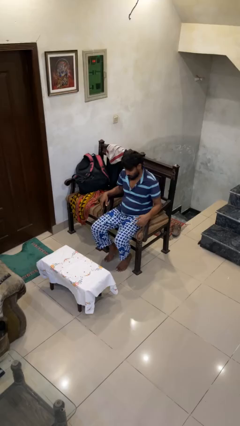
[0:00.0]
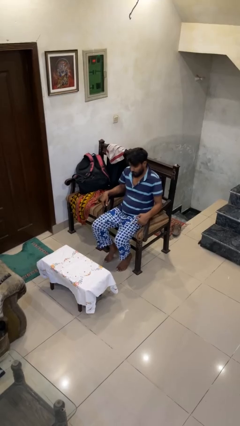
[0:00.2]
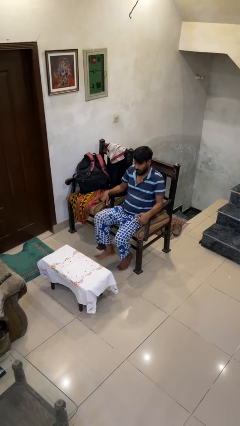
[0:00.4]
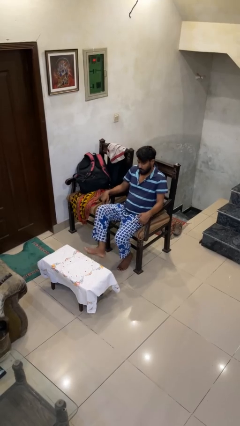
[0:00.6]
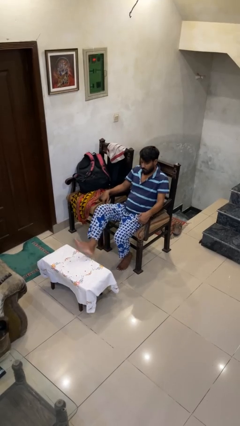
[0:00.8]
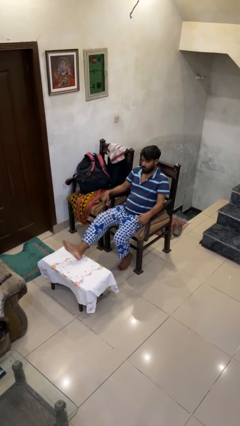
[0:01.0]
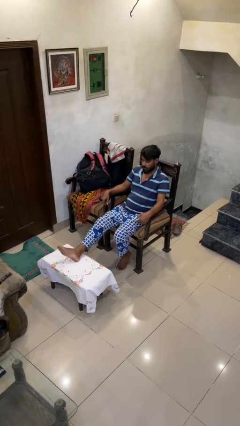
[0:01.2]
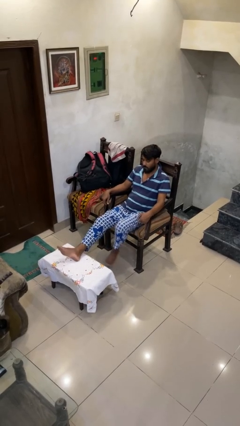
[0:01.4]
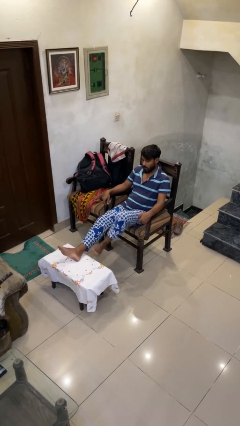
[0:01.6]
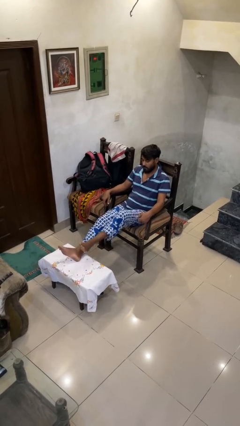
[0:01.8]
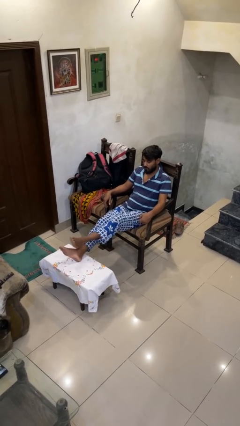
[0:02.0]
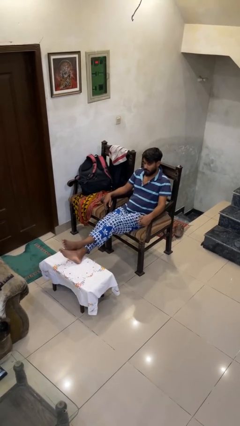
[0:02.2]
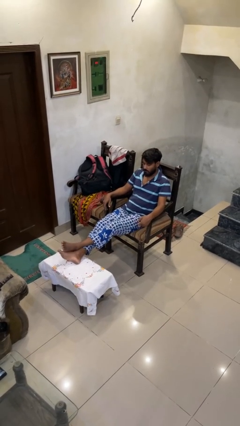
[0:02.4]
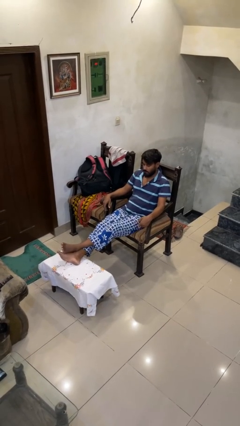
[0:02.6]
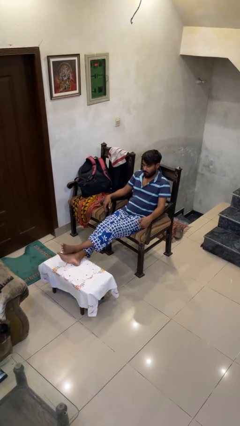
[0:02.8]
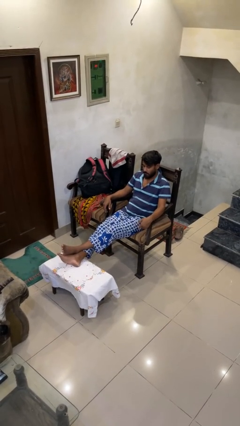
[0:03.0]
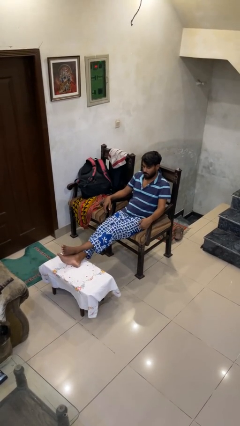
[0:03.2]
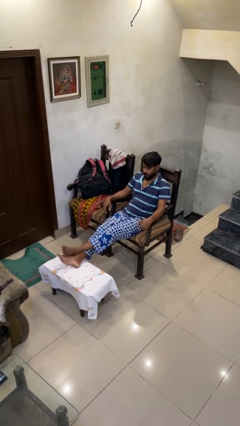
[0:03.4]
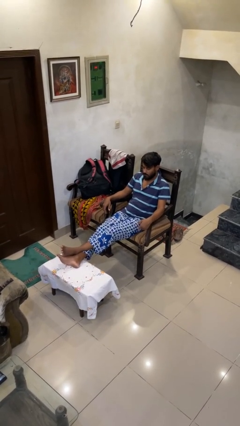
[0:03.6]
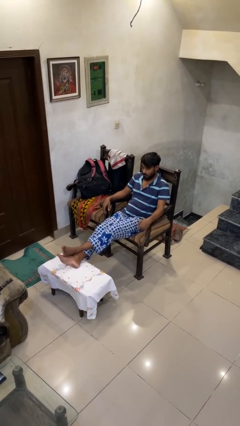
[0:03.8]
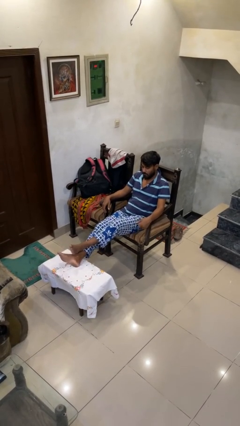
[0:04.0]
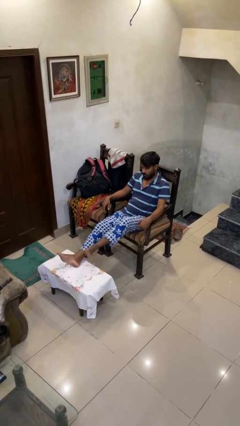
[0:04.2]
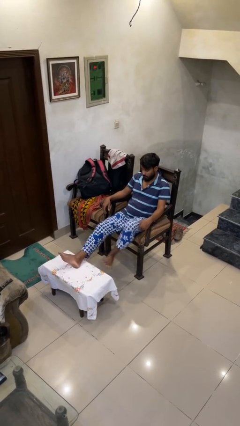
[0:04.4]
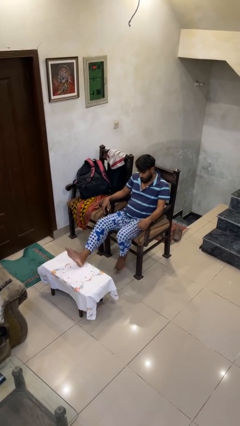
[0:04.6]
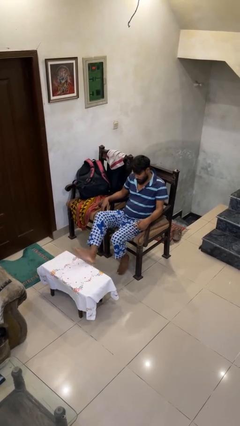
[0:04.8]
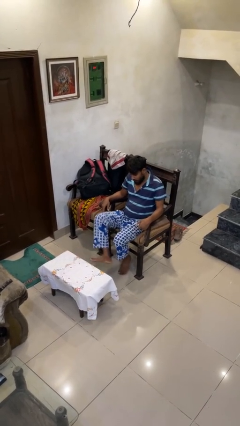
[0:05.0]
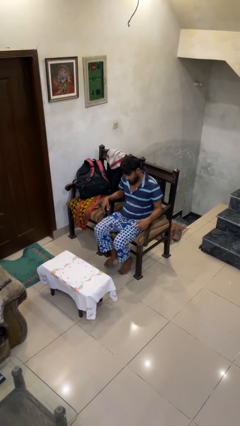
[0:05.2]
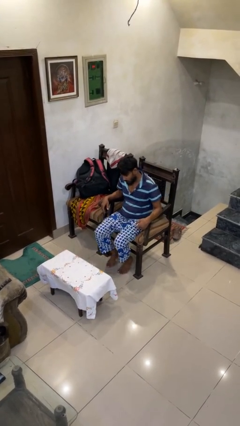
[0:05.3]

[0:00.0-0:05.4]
person puts feet up

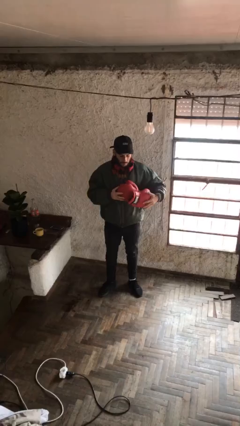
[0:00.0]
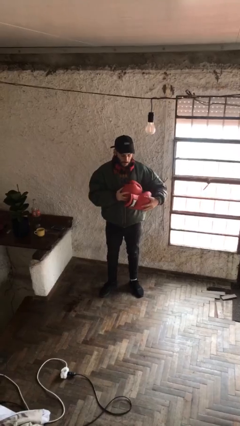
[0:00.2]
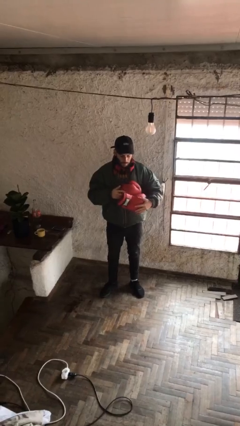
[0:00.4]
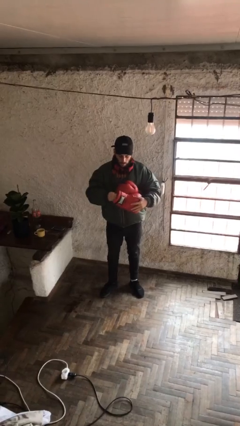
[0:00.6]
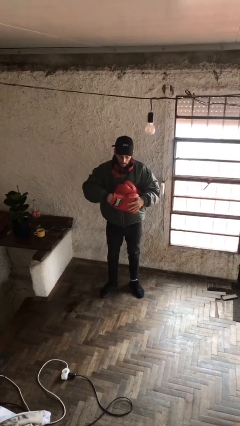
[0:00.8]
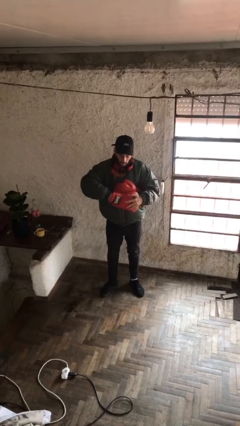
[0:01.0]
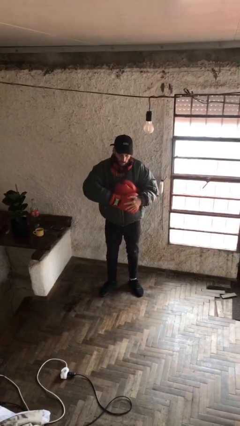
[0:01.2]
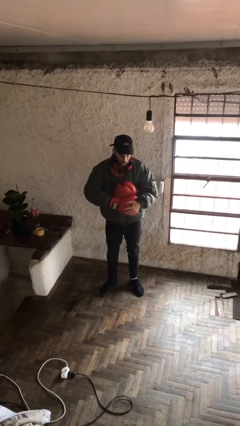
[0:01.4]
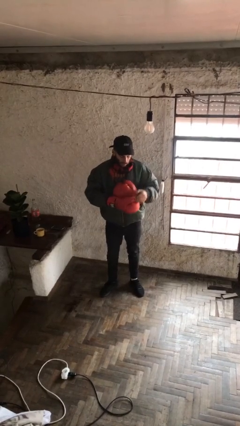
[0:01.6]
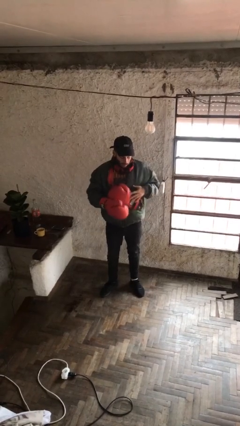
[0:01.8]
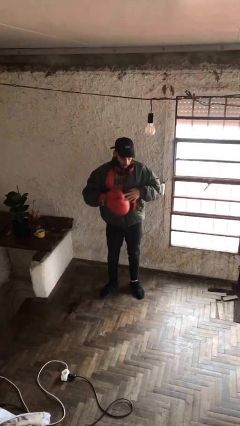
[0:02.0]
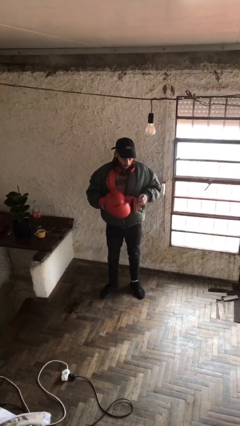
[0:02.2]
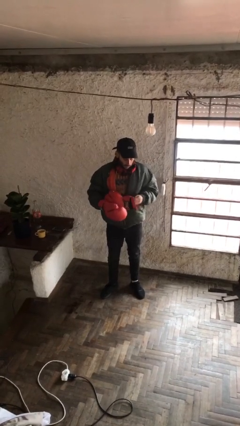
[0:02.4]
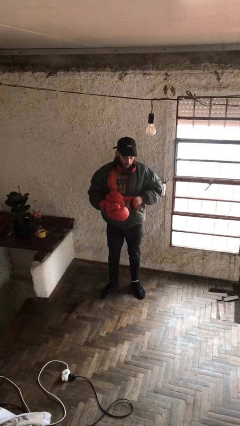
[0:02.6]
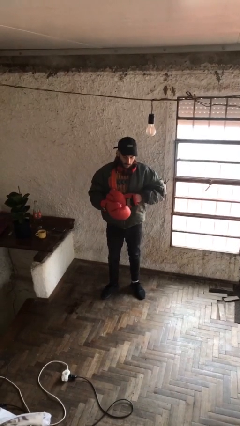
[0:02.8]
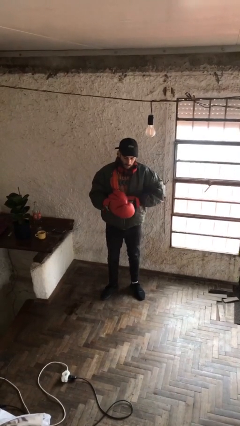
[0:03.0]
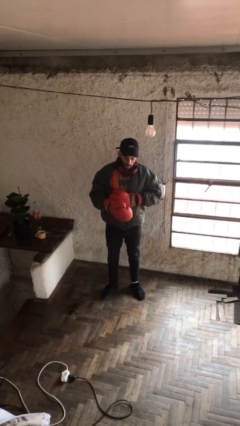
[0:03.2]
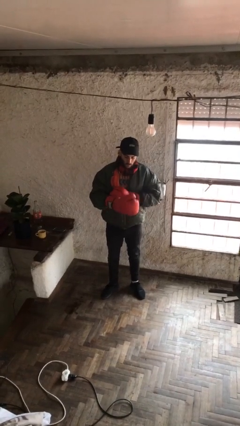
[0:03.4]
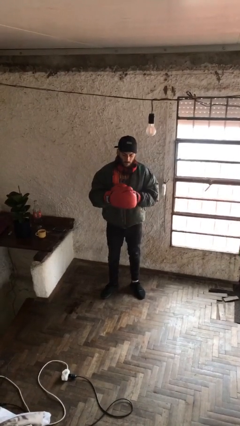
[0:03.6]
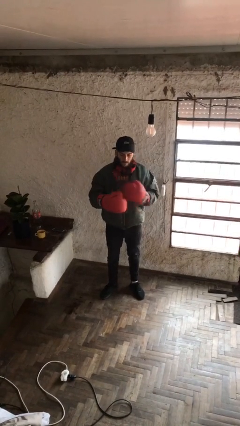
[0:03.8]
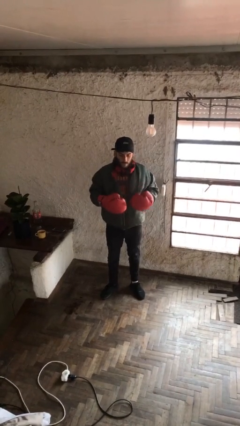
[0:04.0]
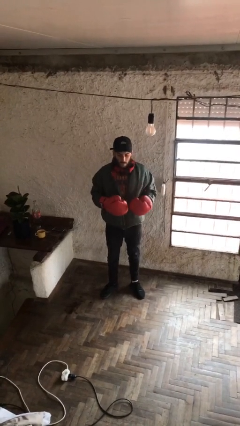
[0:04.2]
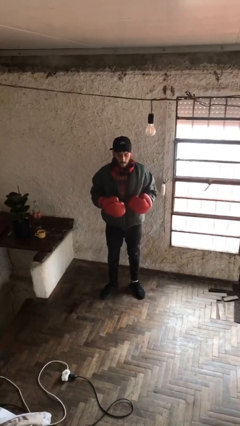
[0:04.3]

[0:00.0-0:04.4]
person puts on gloves

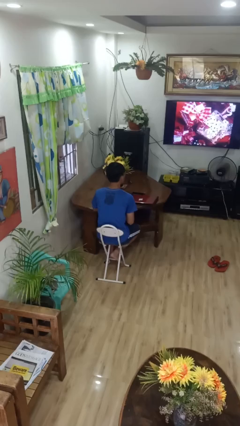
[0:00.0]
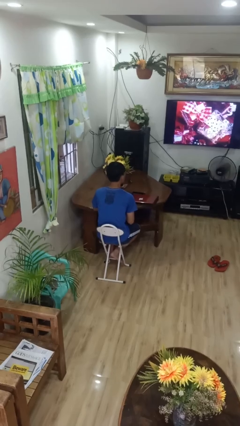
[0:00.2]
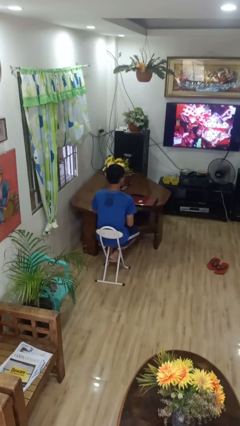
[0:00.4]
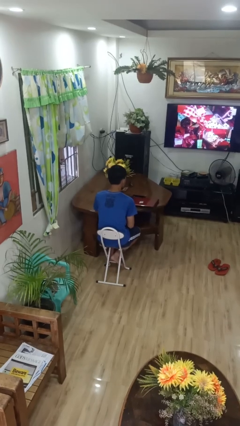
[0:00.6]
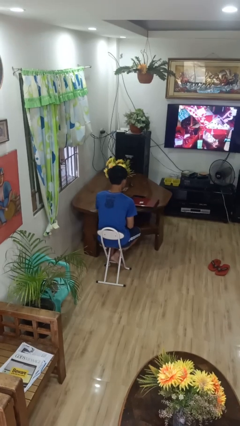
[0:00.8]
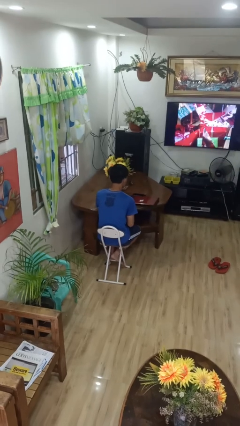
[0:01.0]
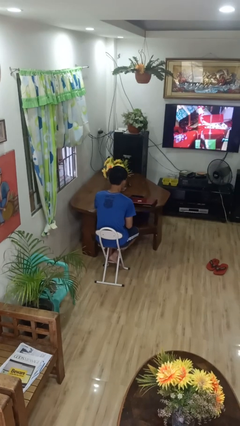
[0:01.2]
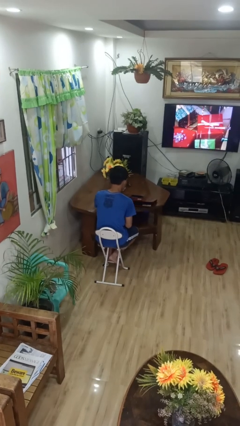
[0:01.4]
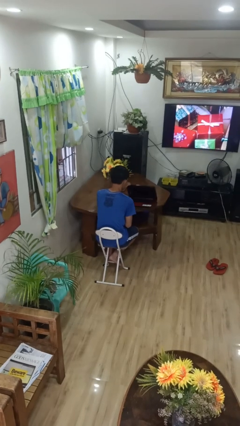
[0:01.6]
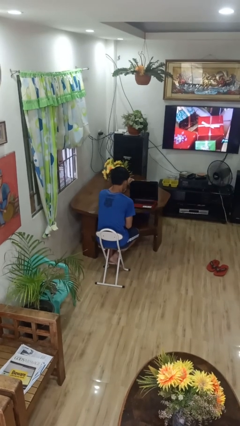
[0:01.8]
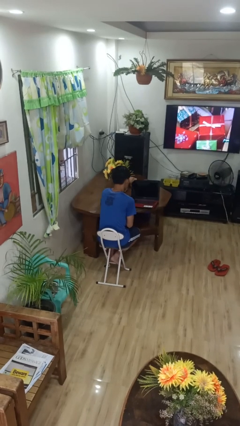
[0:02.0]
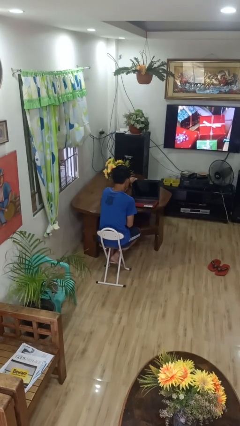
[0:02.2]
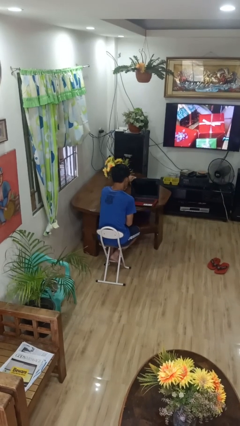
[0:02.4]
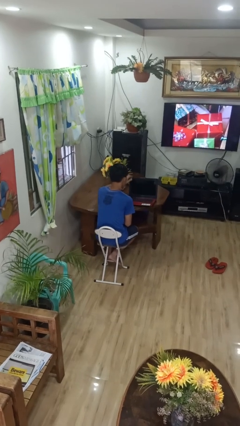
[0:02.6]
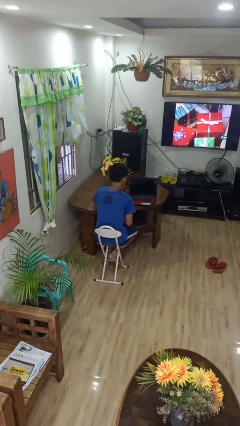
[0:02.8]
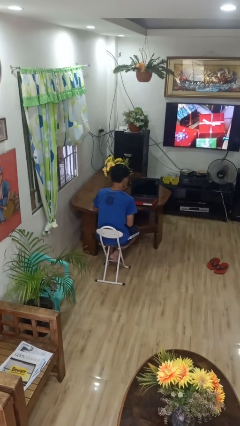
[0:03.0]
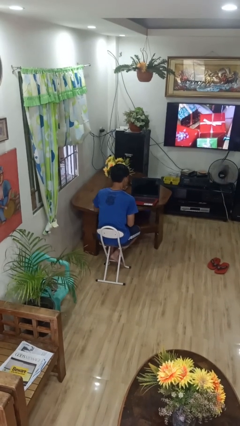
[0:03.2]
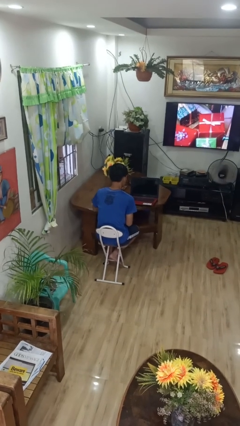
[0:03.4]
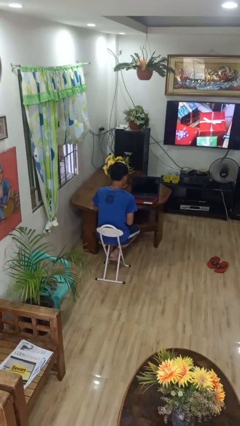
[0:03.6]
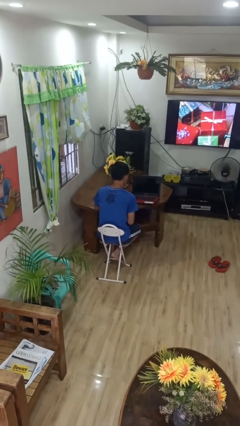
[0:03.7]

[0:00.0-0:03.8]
person opens laptop

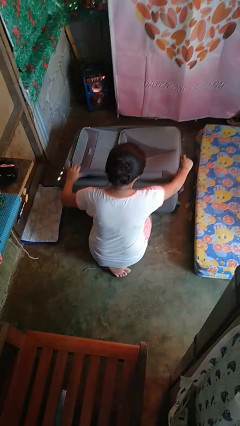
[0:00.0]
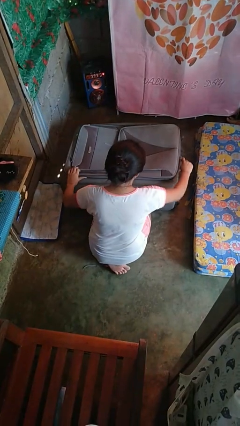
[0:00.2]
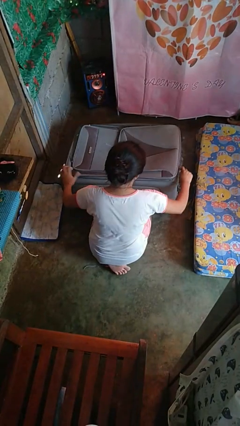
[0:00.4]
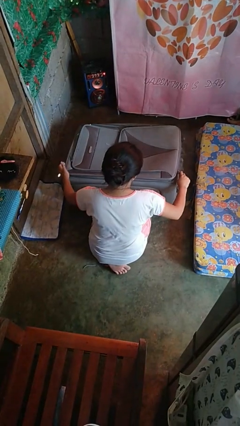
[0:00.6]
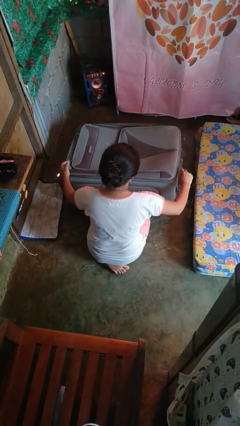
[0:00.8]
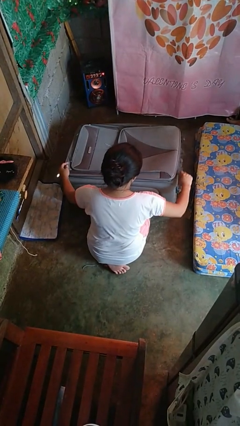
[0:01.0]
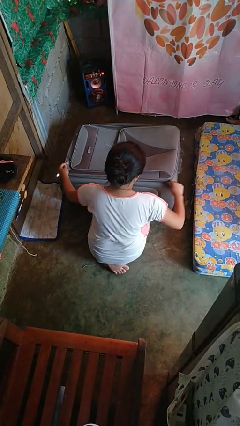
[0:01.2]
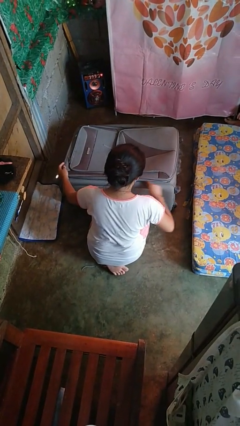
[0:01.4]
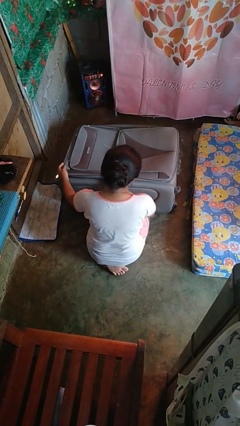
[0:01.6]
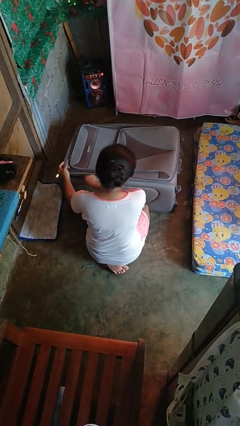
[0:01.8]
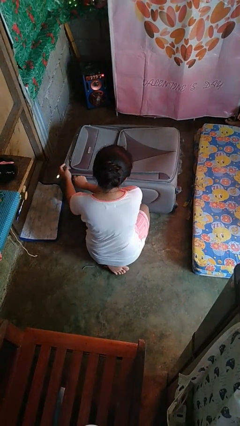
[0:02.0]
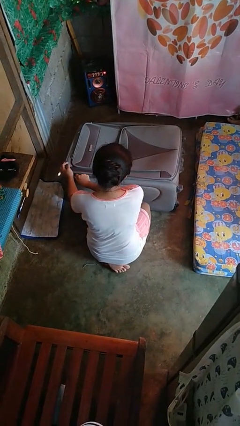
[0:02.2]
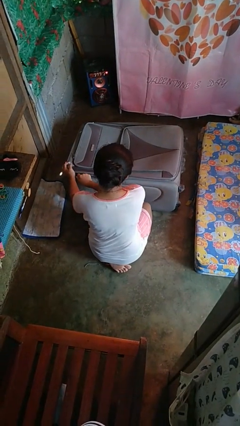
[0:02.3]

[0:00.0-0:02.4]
person closes suitcase

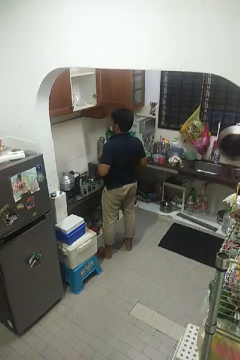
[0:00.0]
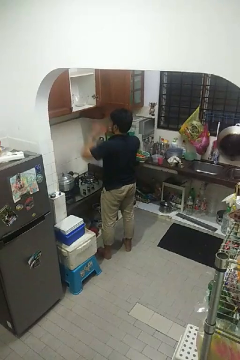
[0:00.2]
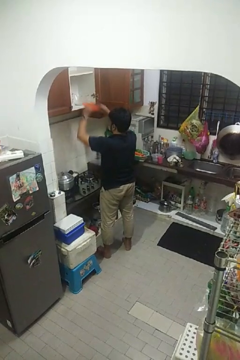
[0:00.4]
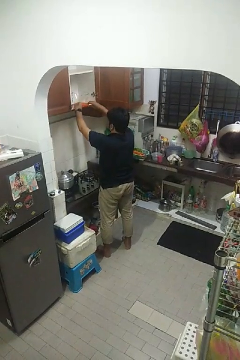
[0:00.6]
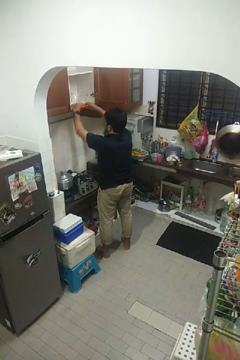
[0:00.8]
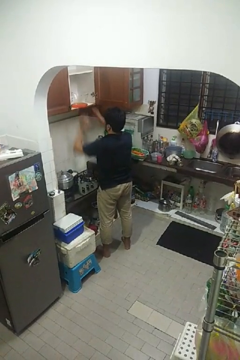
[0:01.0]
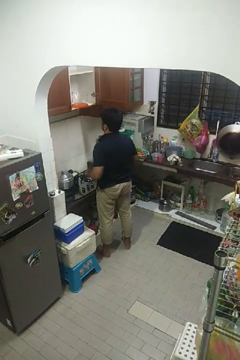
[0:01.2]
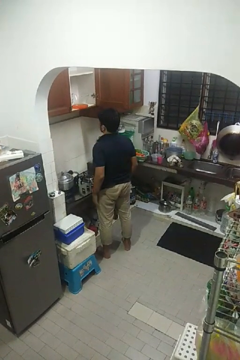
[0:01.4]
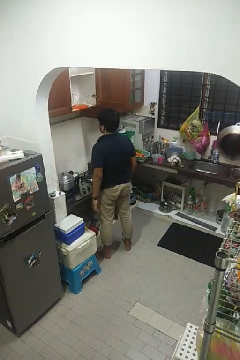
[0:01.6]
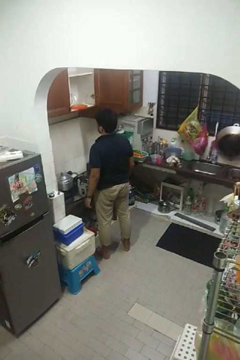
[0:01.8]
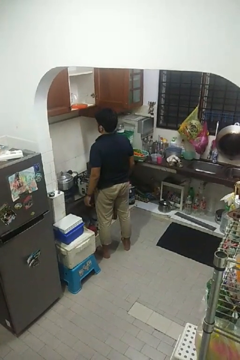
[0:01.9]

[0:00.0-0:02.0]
person puts object in cabinet

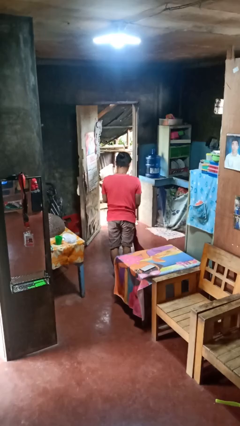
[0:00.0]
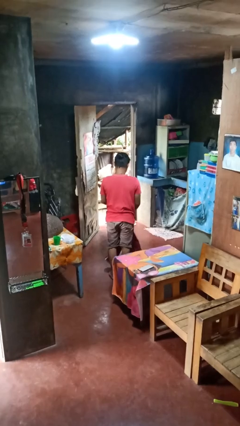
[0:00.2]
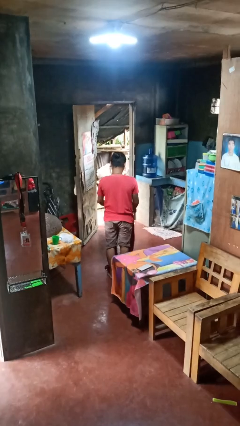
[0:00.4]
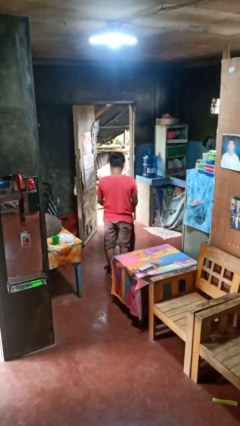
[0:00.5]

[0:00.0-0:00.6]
person puts on pants
